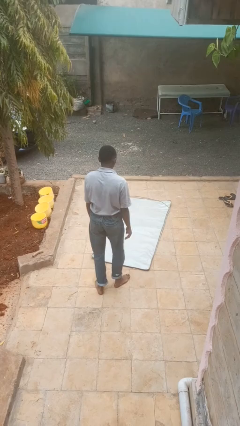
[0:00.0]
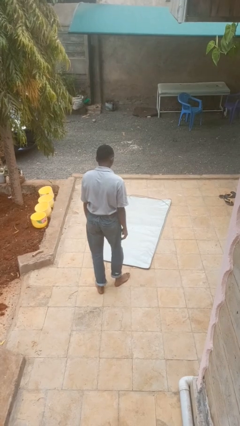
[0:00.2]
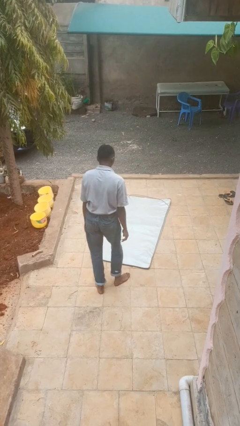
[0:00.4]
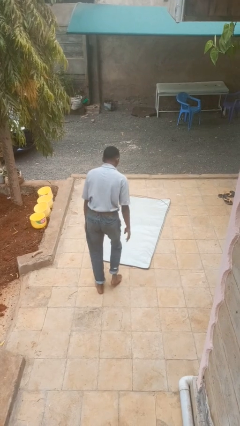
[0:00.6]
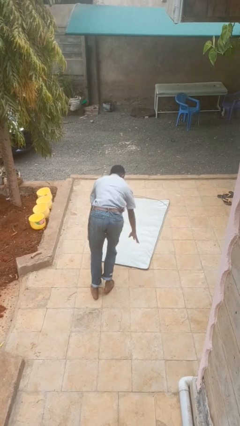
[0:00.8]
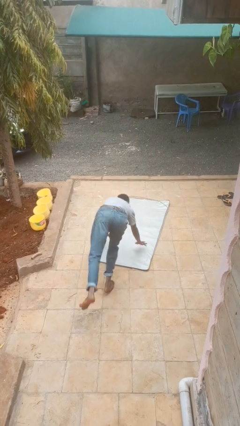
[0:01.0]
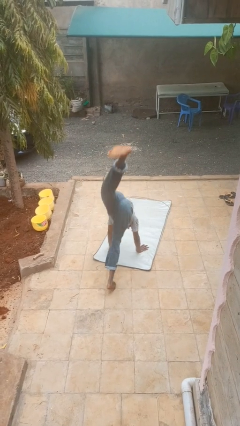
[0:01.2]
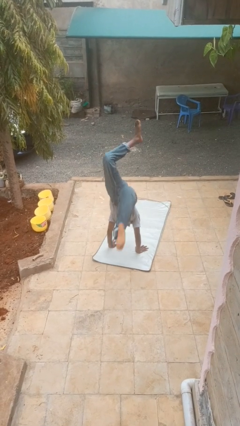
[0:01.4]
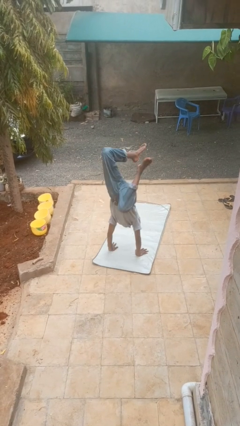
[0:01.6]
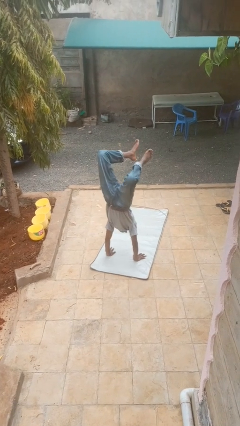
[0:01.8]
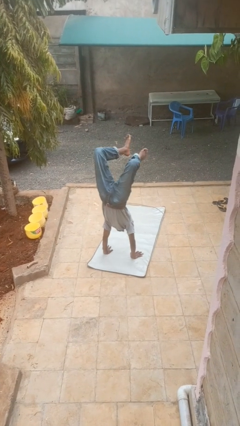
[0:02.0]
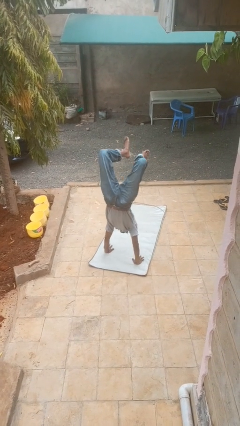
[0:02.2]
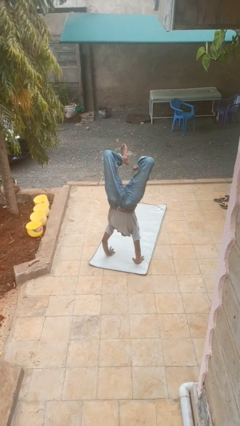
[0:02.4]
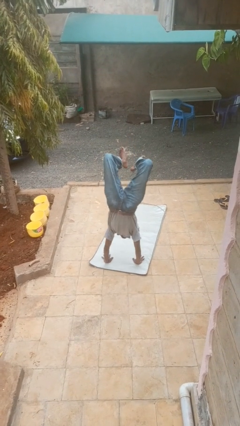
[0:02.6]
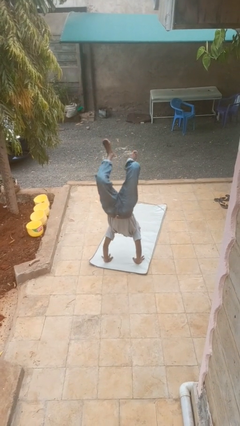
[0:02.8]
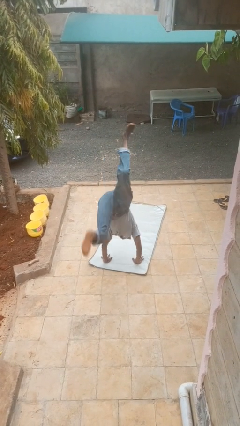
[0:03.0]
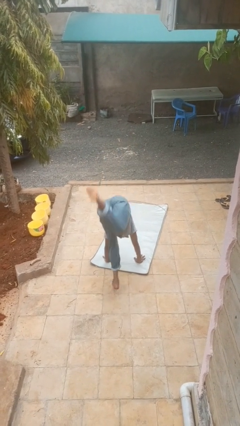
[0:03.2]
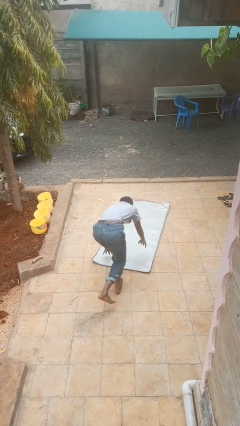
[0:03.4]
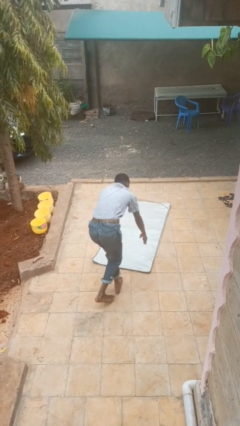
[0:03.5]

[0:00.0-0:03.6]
person handstand

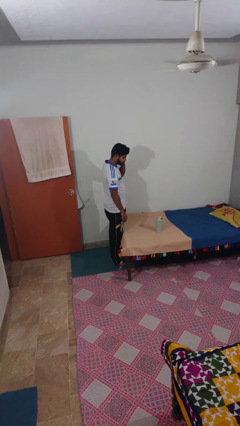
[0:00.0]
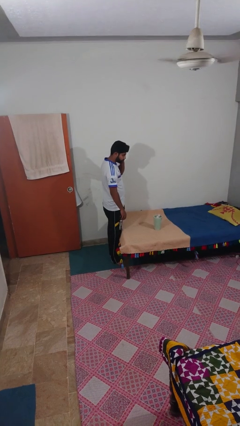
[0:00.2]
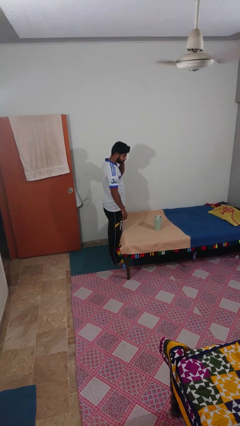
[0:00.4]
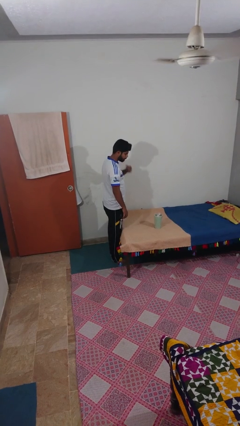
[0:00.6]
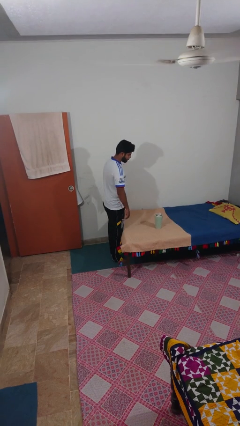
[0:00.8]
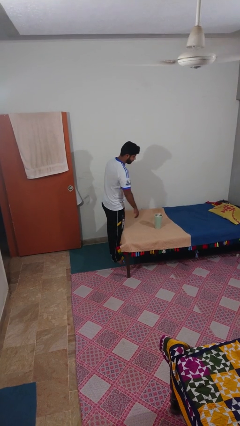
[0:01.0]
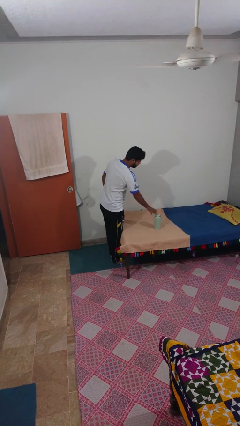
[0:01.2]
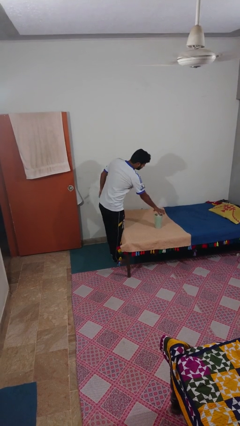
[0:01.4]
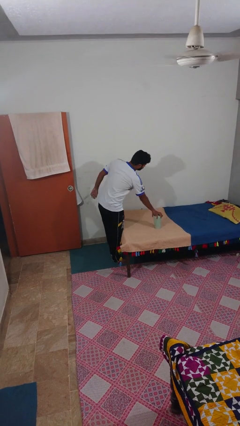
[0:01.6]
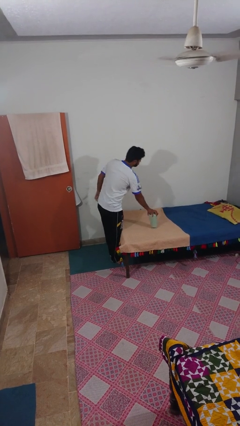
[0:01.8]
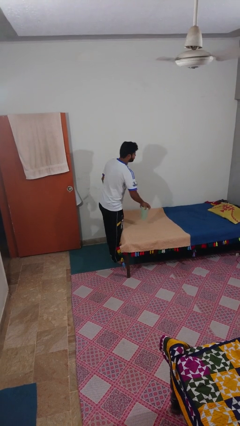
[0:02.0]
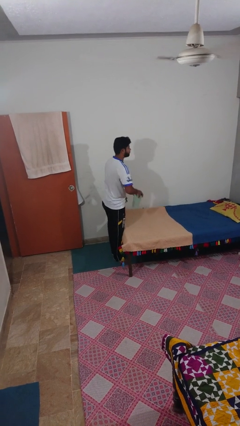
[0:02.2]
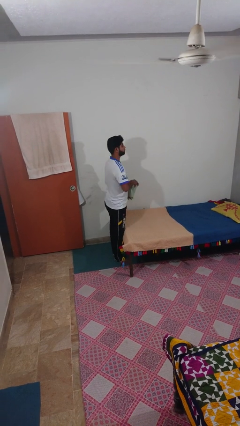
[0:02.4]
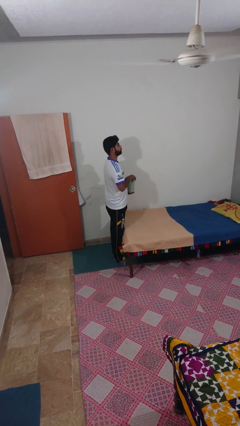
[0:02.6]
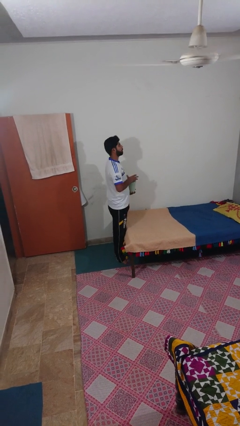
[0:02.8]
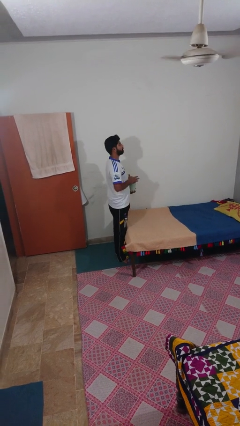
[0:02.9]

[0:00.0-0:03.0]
person picks up object from bed

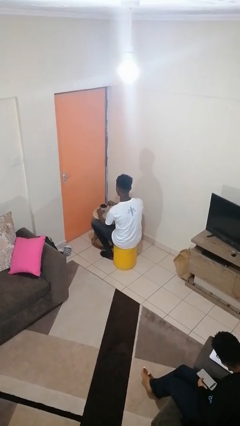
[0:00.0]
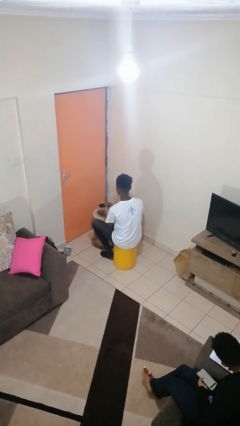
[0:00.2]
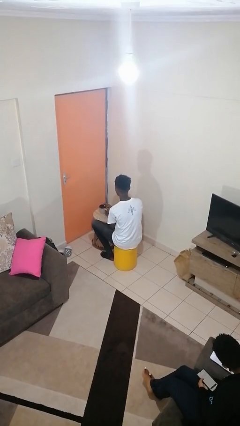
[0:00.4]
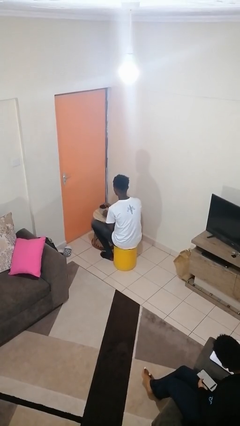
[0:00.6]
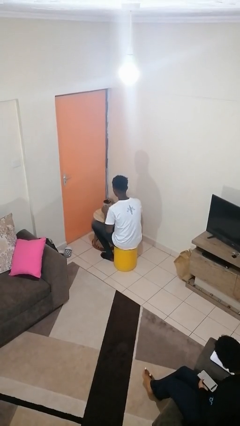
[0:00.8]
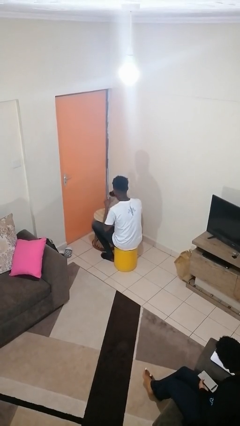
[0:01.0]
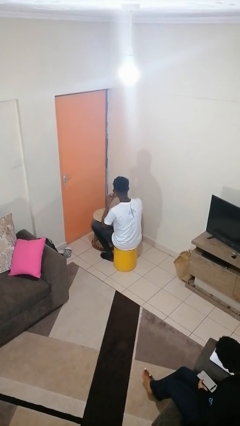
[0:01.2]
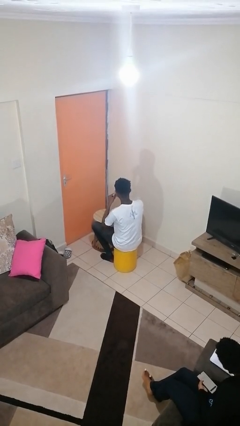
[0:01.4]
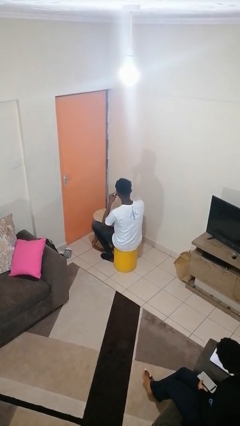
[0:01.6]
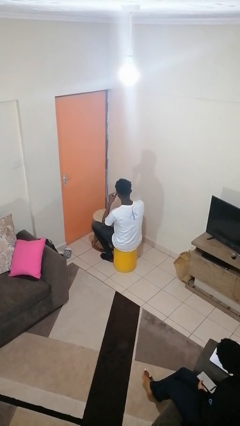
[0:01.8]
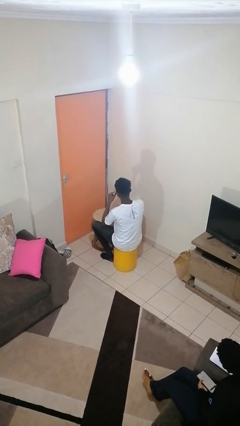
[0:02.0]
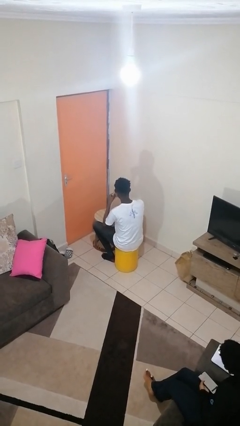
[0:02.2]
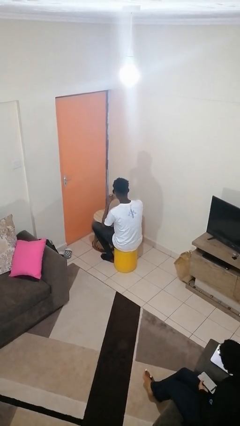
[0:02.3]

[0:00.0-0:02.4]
person drinks from mug

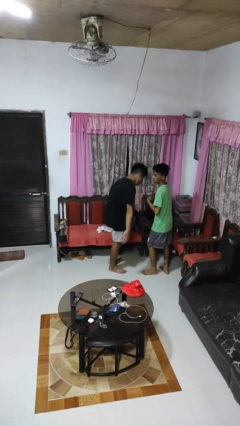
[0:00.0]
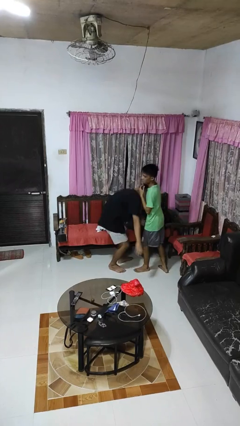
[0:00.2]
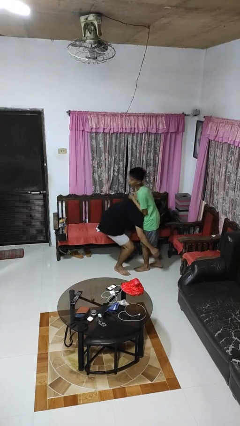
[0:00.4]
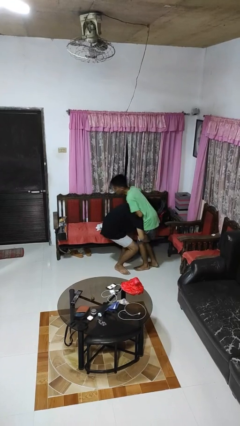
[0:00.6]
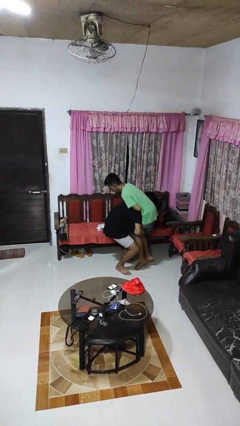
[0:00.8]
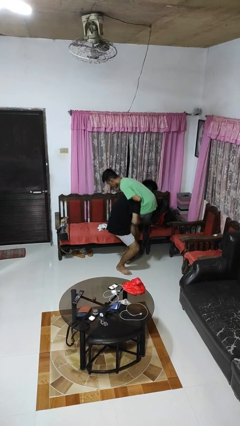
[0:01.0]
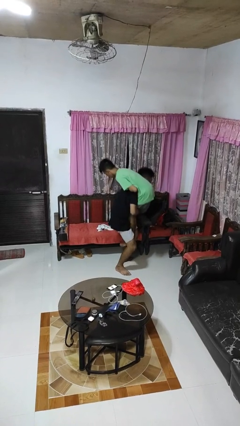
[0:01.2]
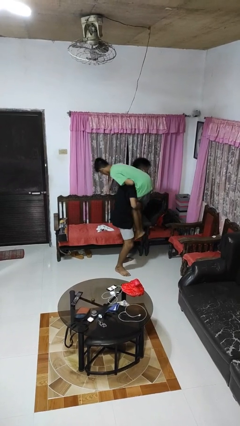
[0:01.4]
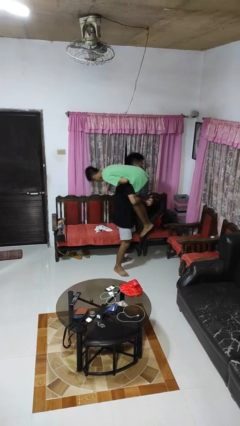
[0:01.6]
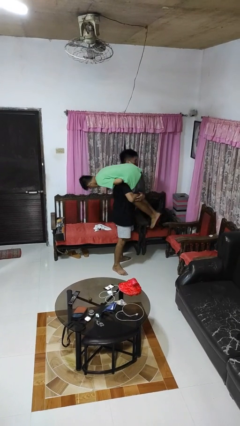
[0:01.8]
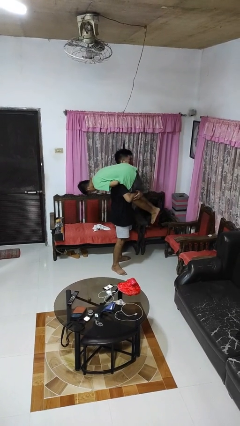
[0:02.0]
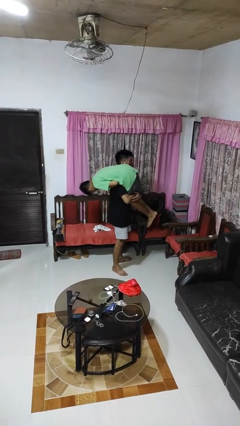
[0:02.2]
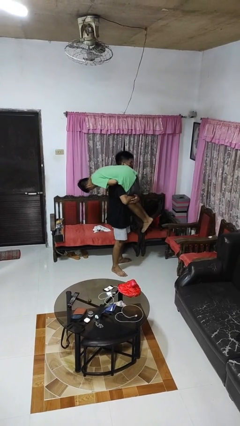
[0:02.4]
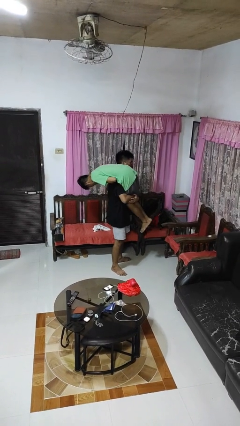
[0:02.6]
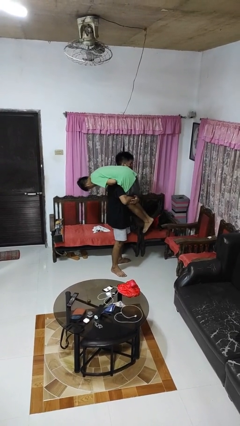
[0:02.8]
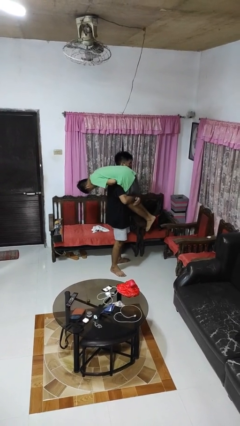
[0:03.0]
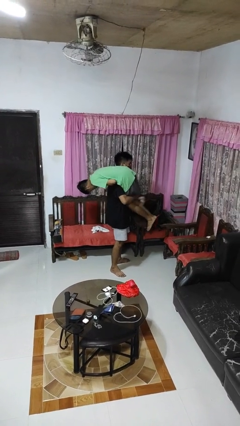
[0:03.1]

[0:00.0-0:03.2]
person carries person over shoulder

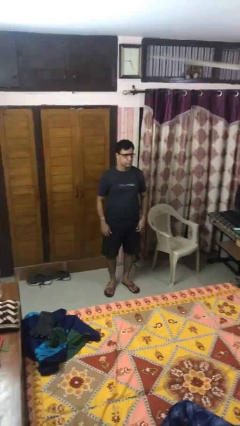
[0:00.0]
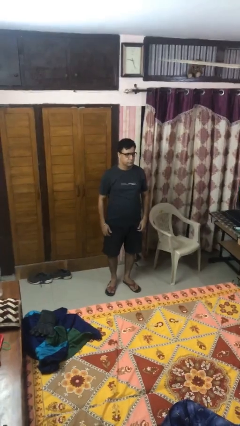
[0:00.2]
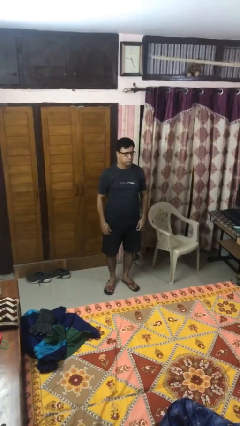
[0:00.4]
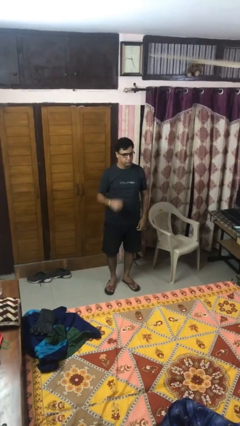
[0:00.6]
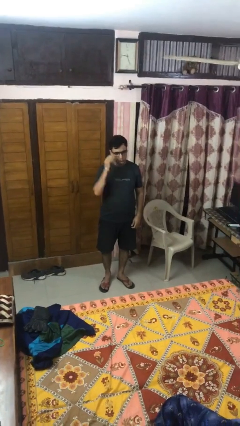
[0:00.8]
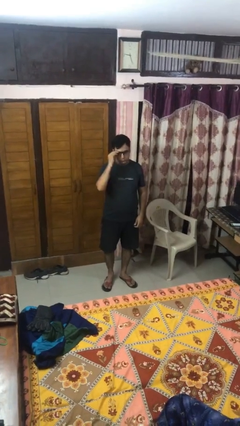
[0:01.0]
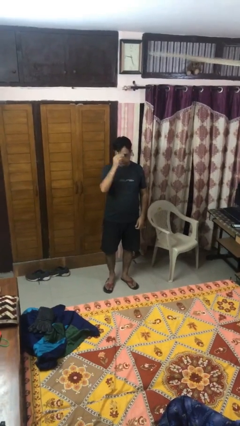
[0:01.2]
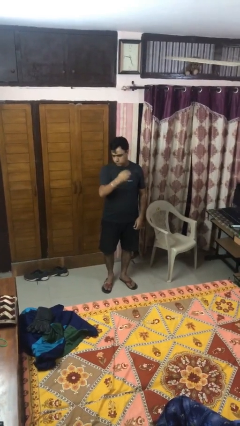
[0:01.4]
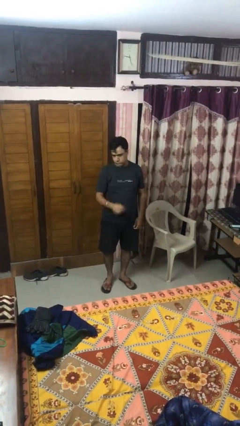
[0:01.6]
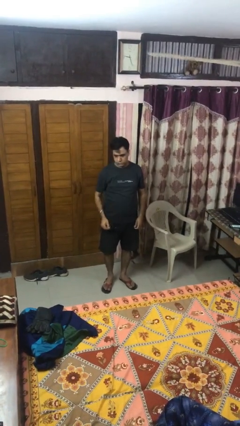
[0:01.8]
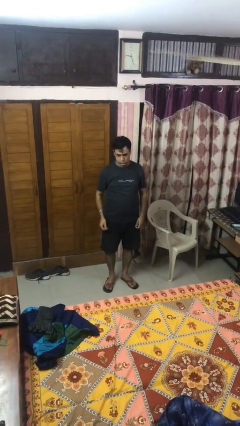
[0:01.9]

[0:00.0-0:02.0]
person takes off glasses

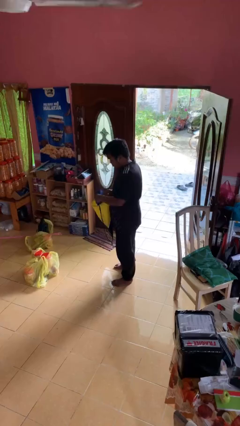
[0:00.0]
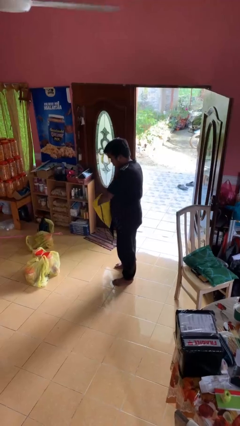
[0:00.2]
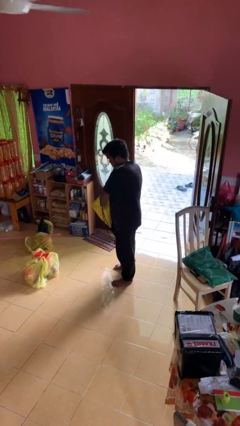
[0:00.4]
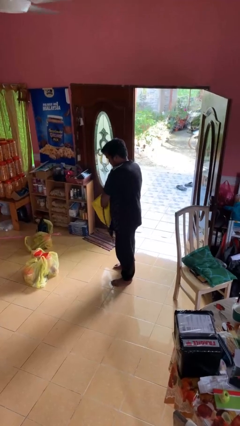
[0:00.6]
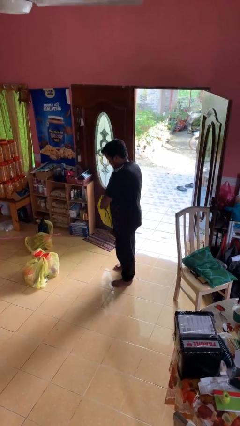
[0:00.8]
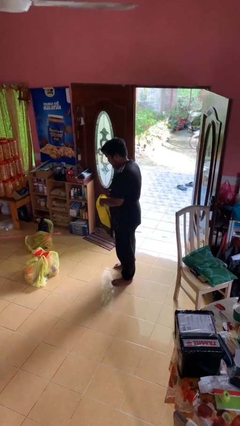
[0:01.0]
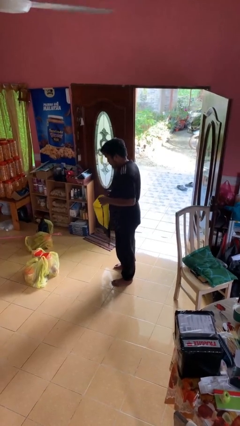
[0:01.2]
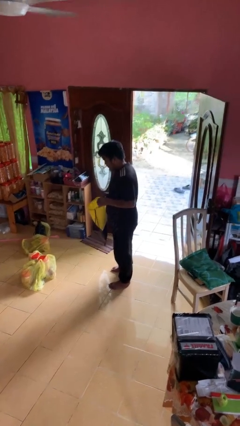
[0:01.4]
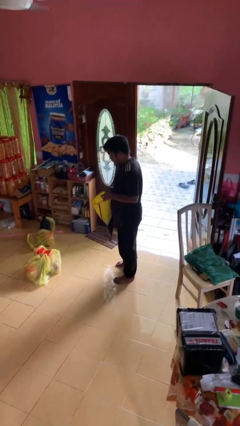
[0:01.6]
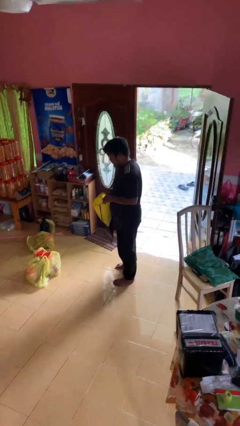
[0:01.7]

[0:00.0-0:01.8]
person puts object into bag

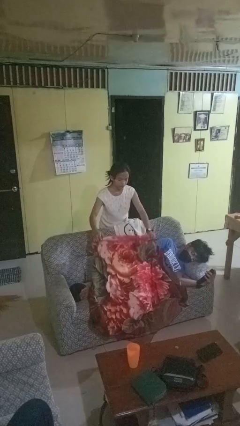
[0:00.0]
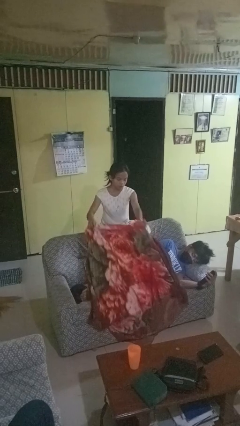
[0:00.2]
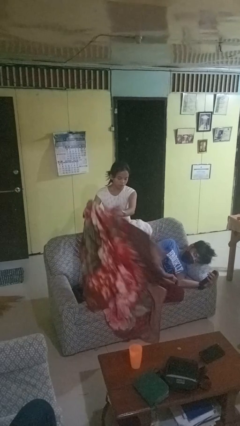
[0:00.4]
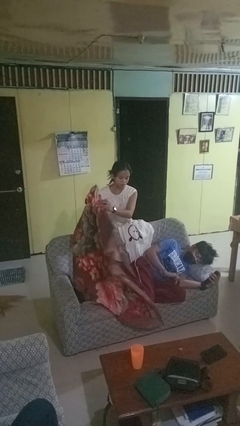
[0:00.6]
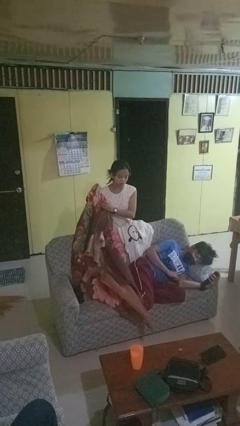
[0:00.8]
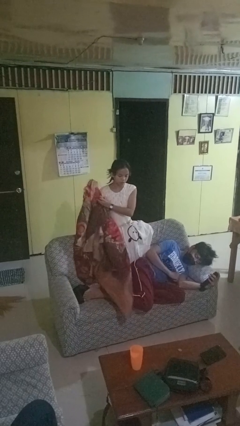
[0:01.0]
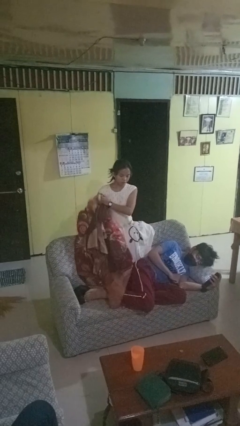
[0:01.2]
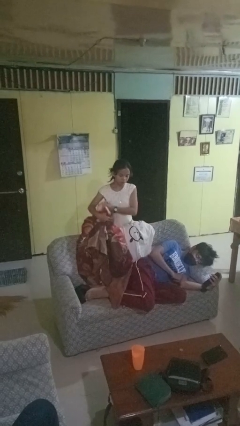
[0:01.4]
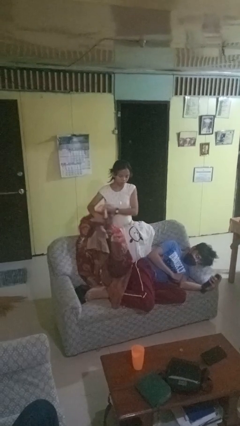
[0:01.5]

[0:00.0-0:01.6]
person uncovers friend with blanket
